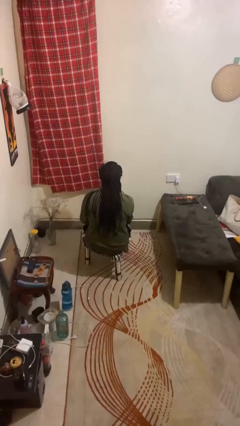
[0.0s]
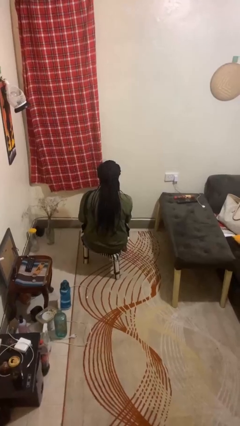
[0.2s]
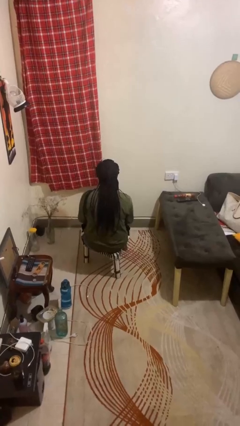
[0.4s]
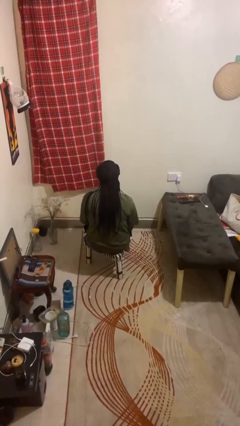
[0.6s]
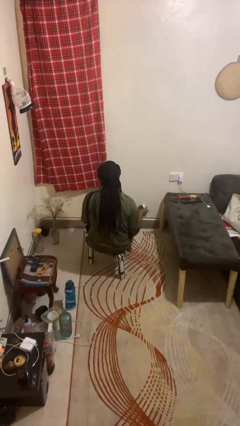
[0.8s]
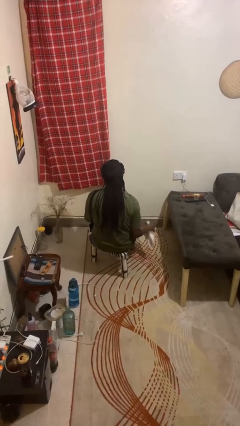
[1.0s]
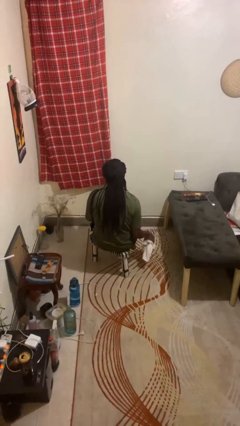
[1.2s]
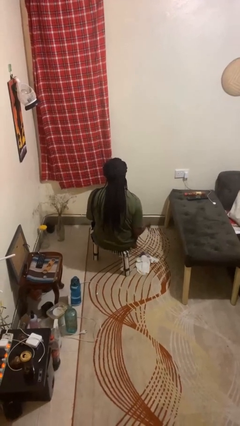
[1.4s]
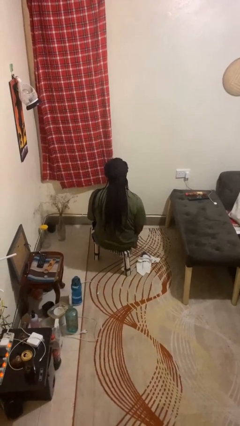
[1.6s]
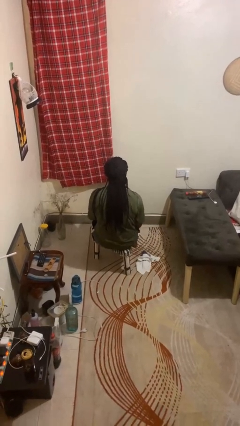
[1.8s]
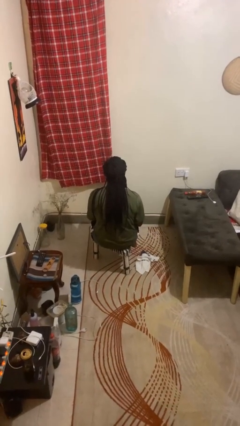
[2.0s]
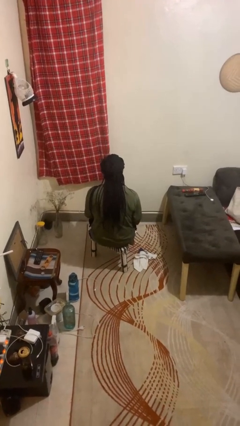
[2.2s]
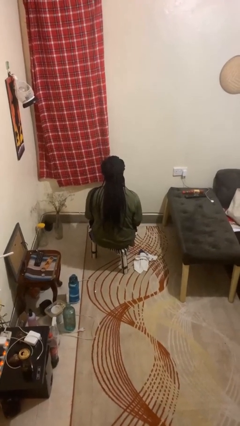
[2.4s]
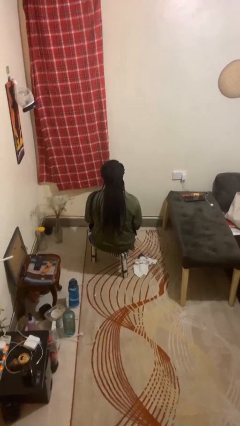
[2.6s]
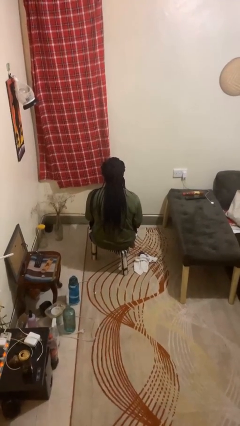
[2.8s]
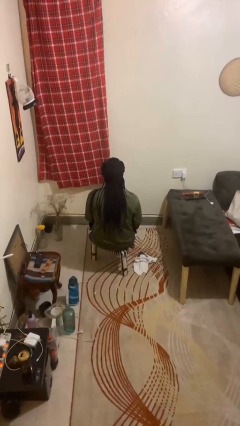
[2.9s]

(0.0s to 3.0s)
person throws object to ground

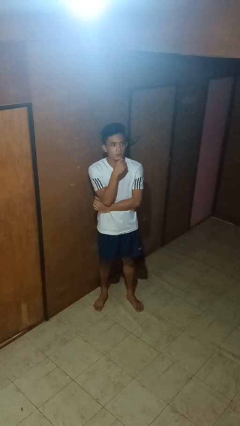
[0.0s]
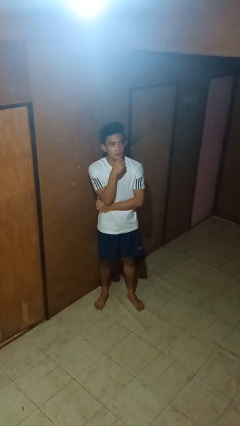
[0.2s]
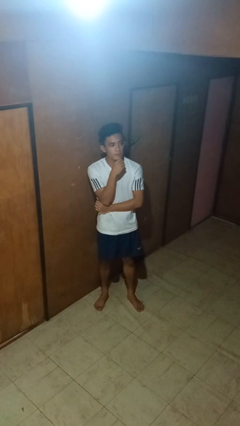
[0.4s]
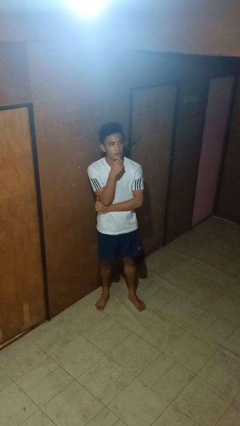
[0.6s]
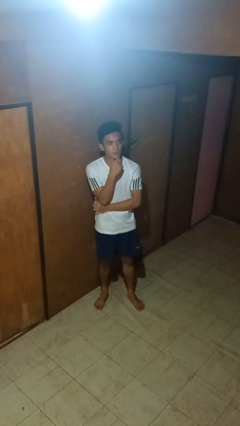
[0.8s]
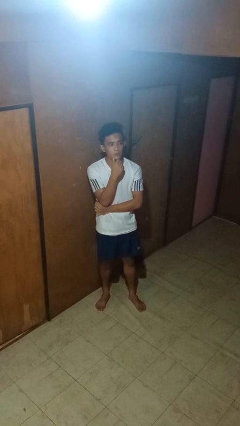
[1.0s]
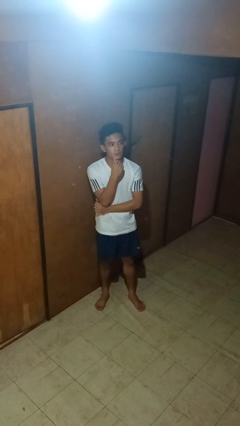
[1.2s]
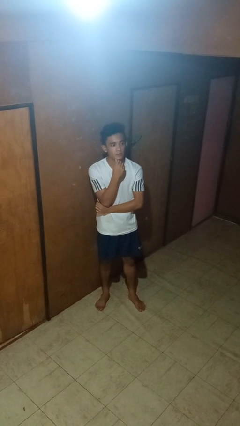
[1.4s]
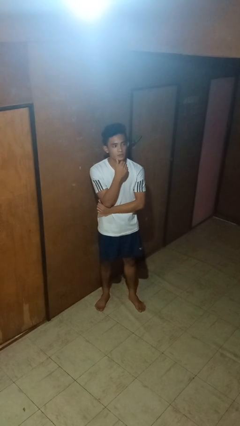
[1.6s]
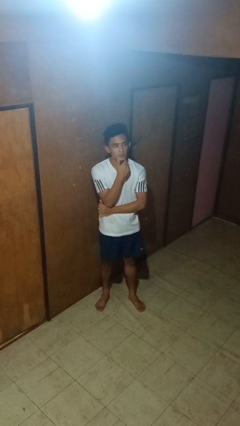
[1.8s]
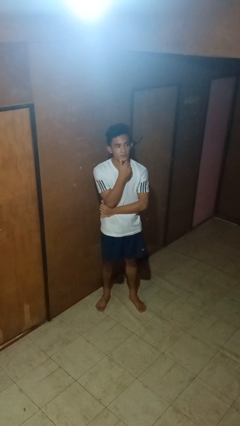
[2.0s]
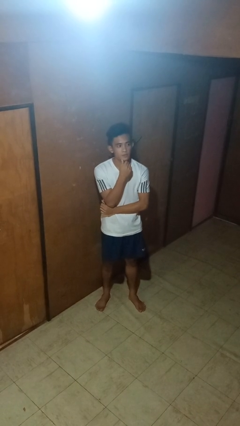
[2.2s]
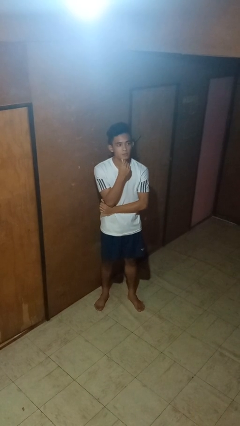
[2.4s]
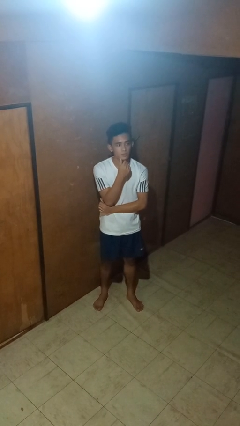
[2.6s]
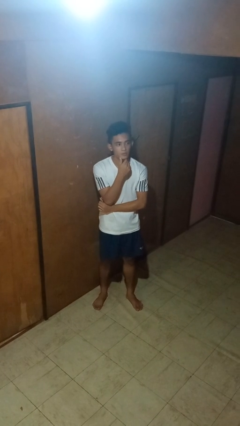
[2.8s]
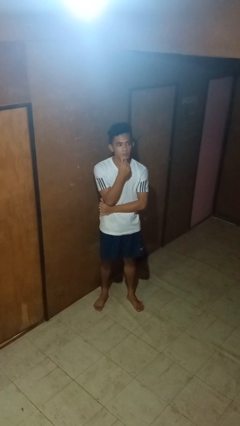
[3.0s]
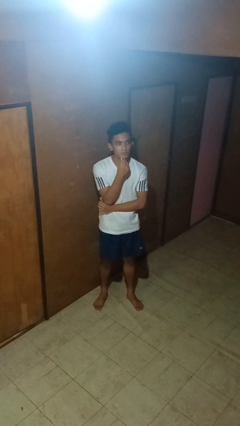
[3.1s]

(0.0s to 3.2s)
person strokes chin

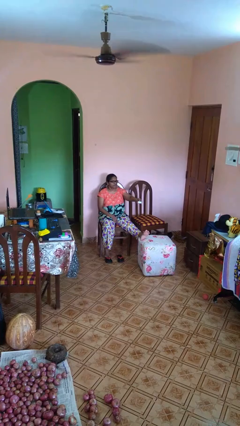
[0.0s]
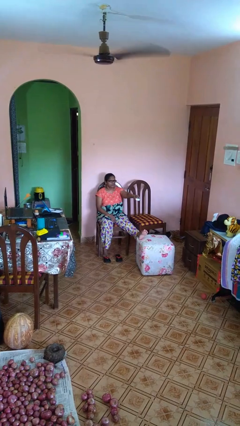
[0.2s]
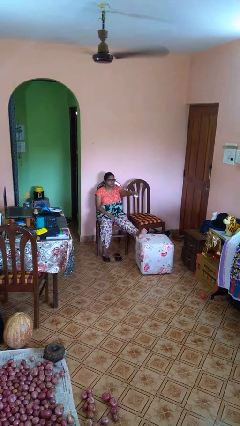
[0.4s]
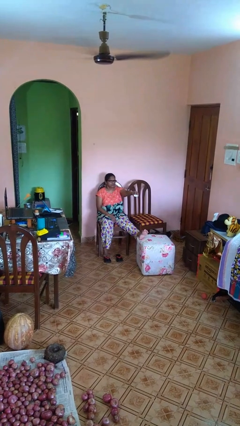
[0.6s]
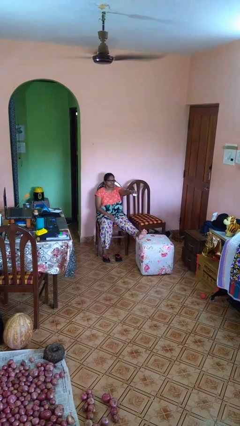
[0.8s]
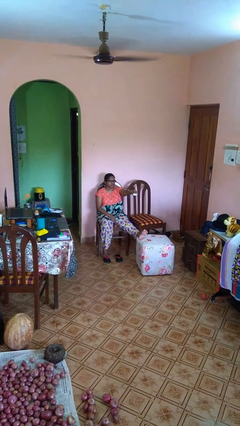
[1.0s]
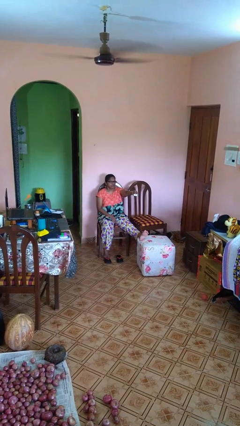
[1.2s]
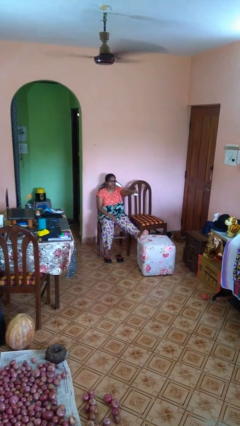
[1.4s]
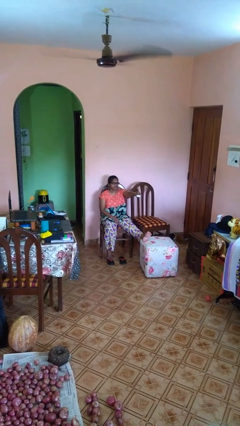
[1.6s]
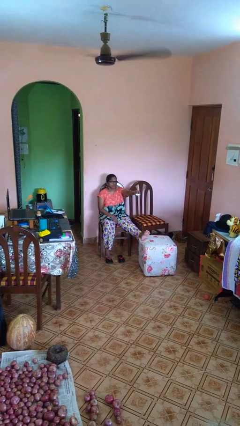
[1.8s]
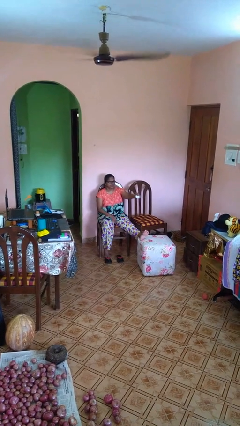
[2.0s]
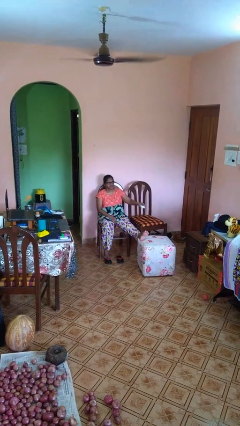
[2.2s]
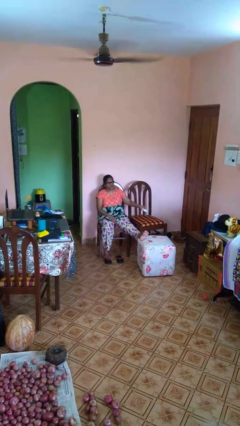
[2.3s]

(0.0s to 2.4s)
person uses television remote

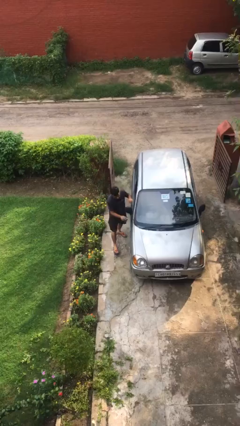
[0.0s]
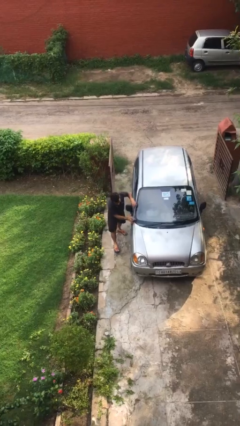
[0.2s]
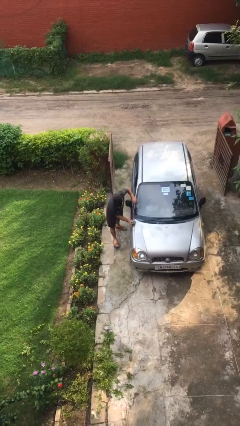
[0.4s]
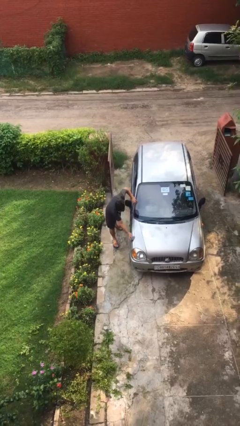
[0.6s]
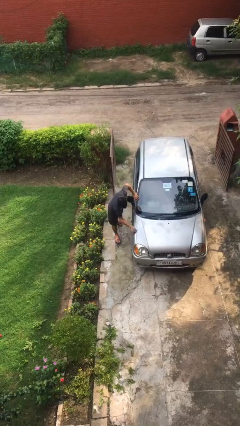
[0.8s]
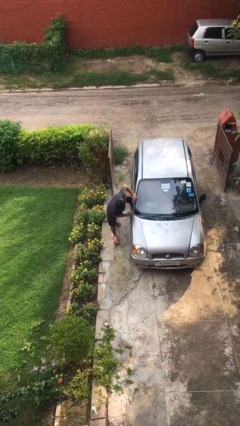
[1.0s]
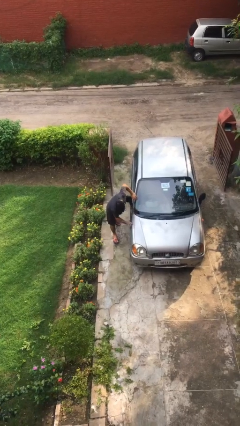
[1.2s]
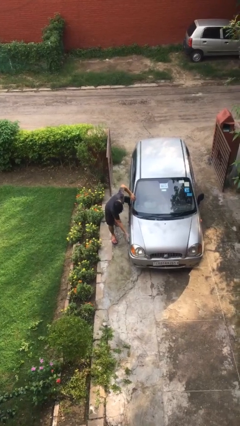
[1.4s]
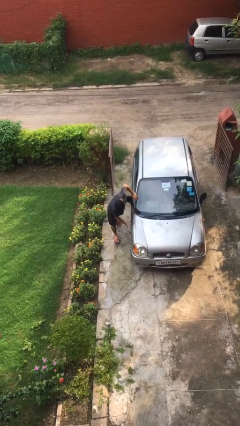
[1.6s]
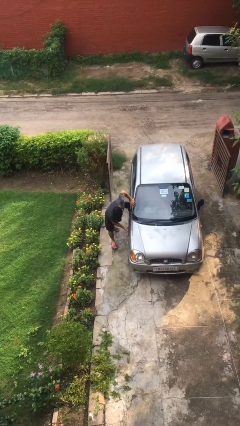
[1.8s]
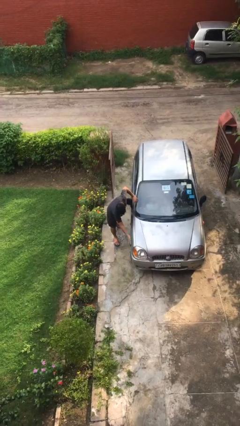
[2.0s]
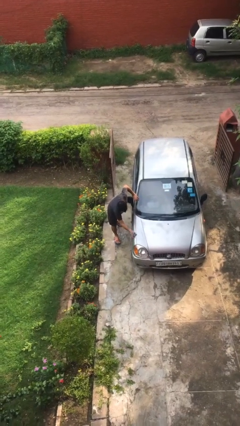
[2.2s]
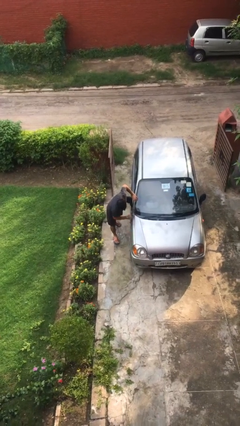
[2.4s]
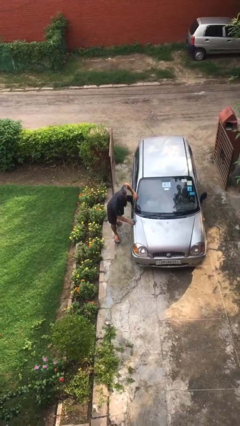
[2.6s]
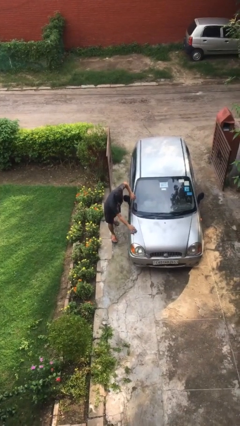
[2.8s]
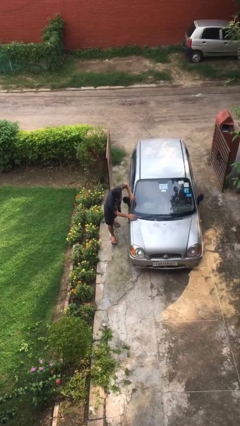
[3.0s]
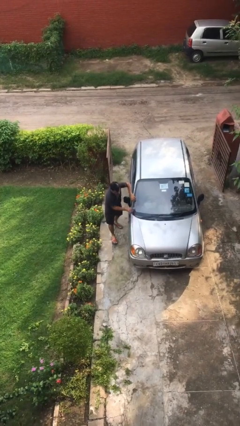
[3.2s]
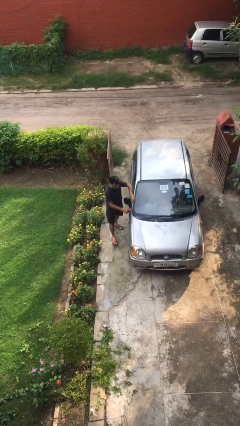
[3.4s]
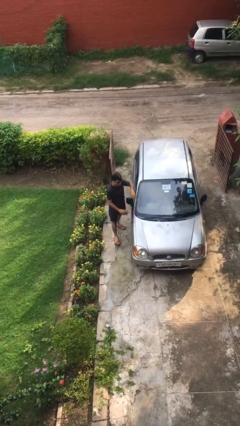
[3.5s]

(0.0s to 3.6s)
person polishes car with rag

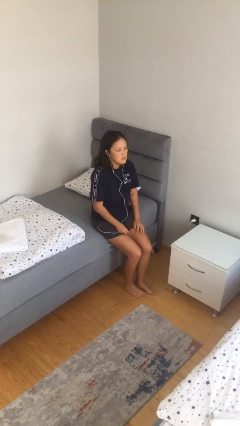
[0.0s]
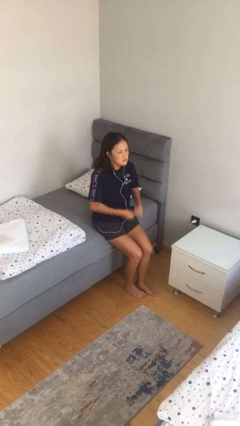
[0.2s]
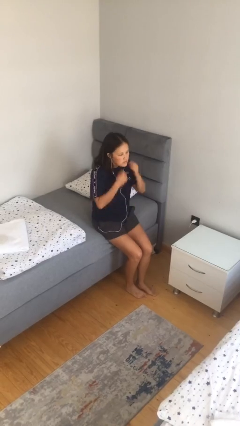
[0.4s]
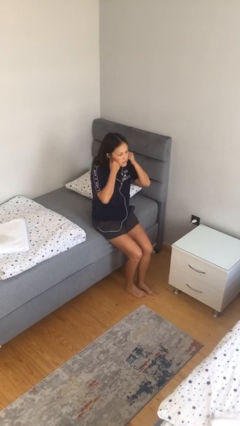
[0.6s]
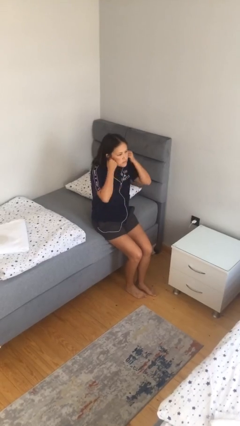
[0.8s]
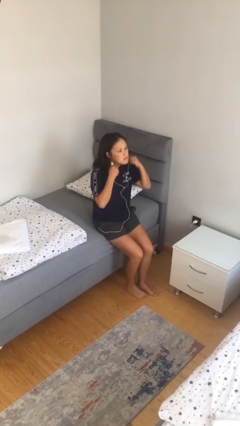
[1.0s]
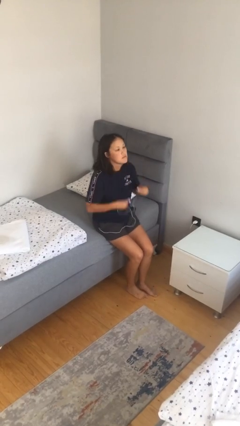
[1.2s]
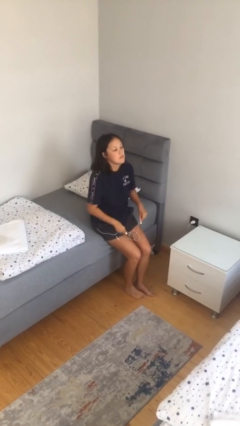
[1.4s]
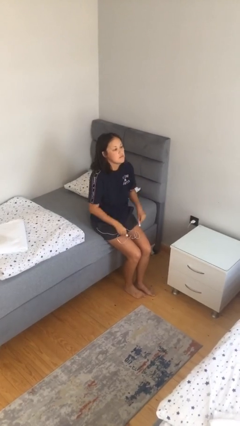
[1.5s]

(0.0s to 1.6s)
person takes off headphones

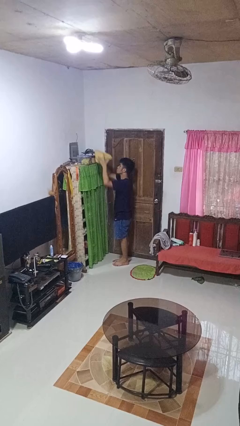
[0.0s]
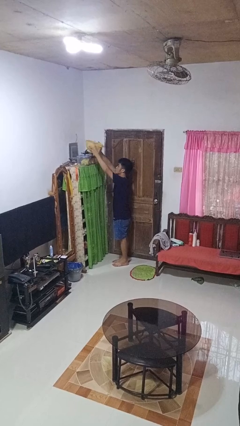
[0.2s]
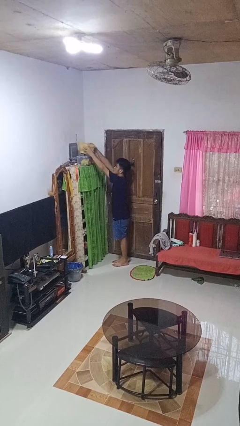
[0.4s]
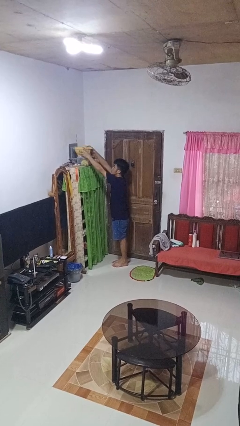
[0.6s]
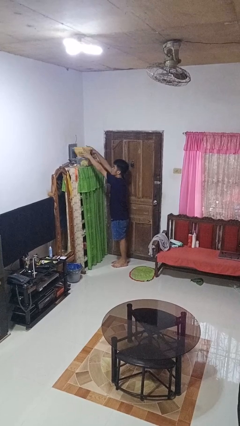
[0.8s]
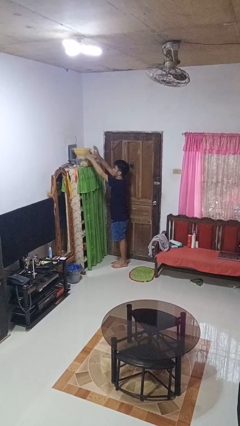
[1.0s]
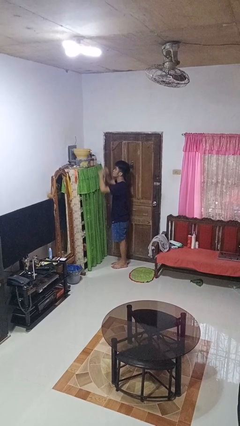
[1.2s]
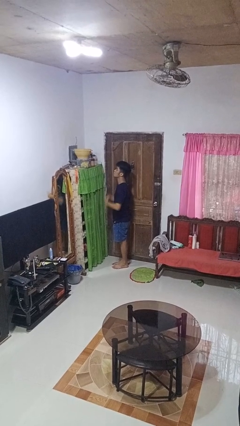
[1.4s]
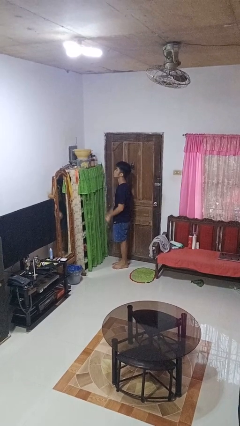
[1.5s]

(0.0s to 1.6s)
person puts down object on shelf

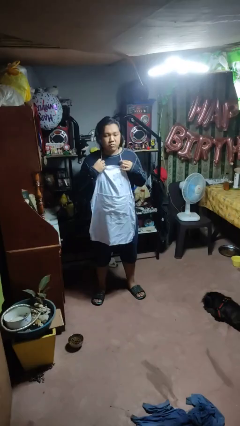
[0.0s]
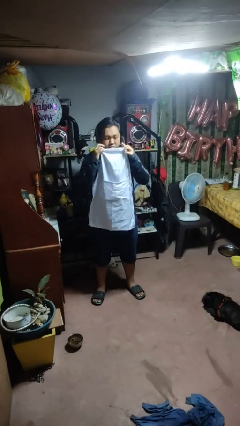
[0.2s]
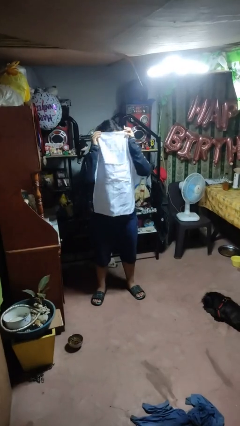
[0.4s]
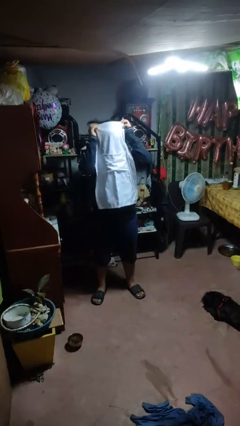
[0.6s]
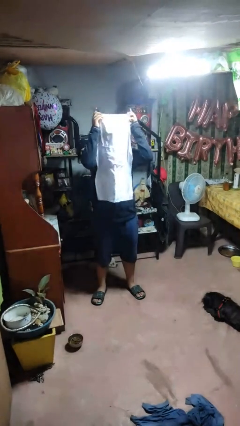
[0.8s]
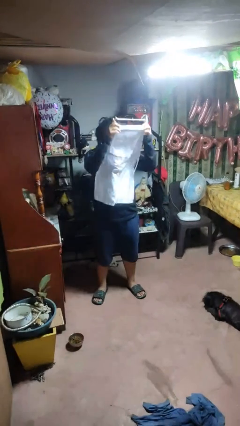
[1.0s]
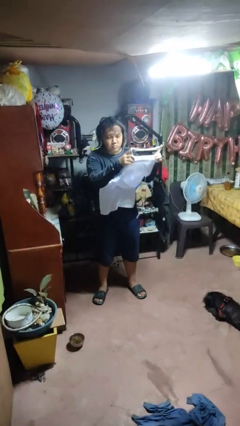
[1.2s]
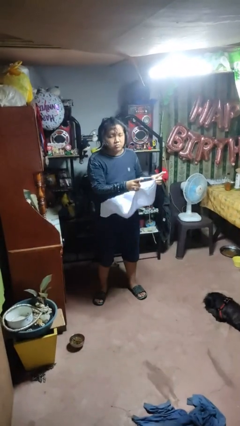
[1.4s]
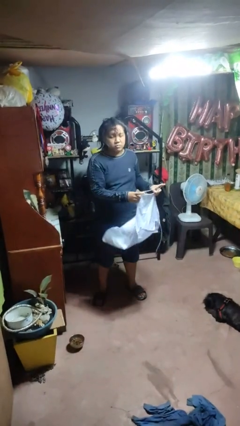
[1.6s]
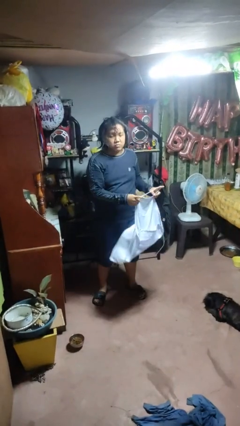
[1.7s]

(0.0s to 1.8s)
person takes off apron
